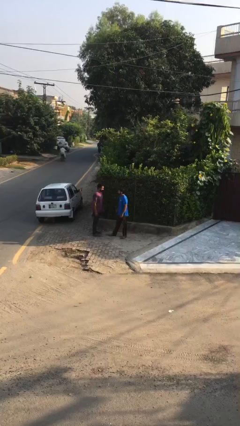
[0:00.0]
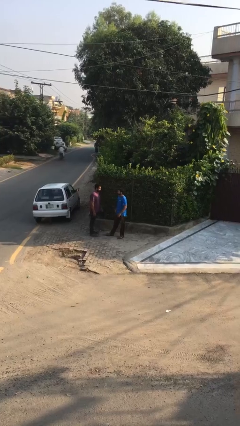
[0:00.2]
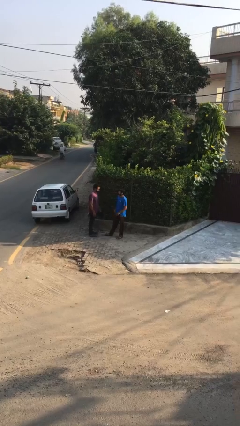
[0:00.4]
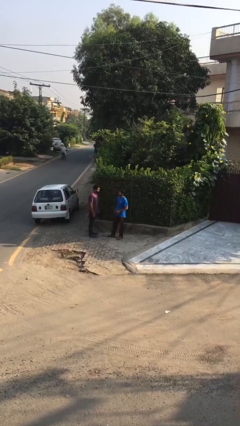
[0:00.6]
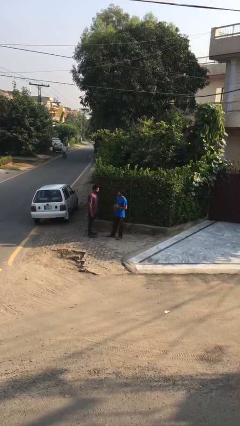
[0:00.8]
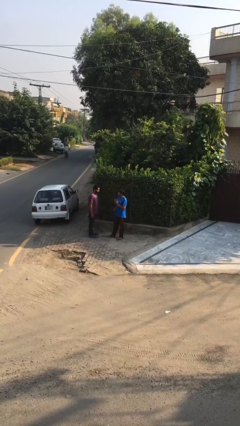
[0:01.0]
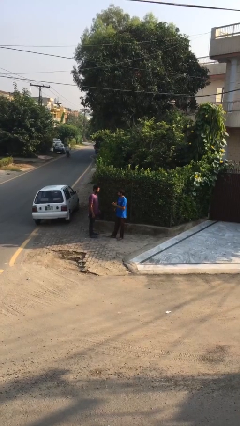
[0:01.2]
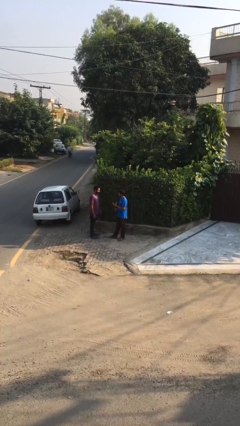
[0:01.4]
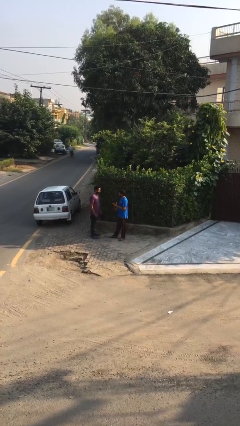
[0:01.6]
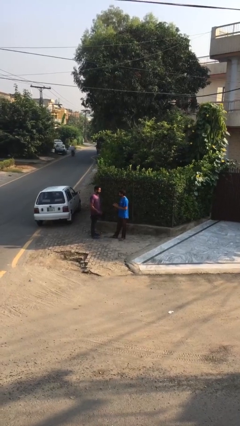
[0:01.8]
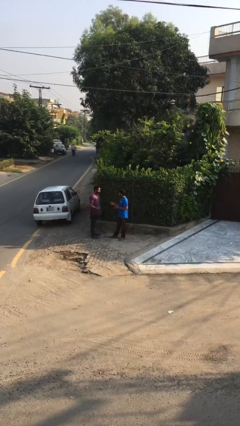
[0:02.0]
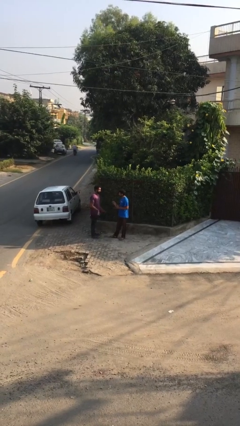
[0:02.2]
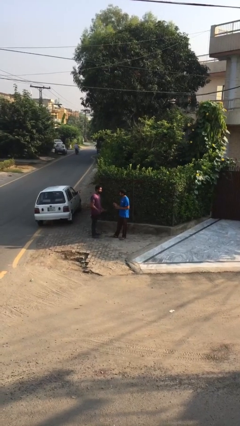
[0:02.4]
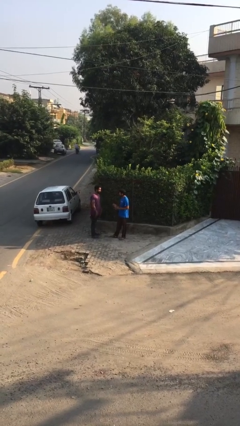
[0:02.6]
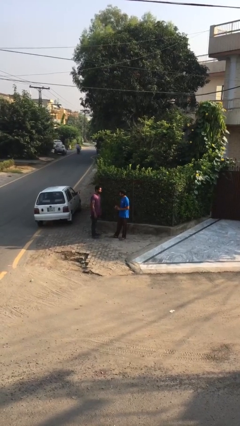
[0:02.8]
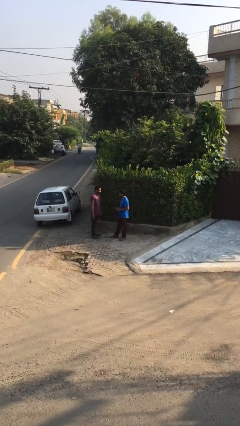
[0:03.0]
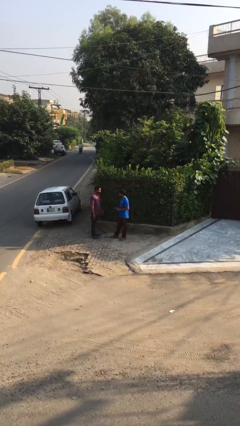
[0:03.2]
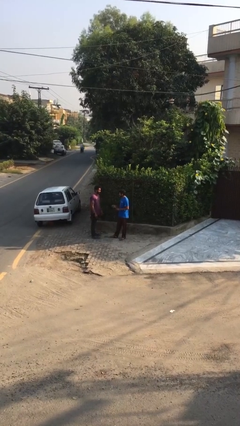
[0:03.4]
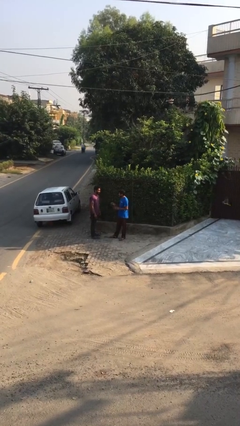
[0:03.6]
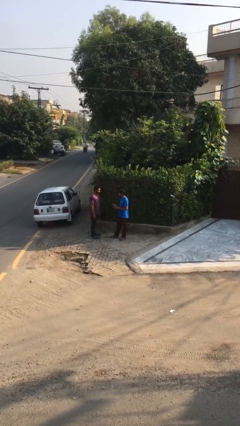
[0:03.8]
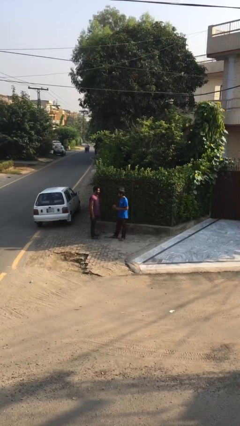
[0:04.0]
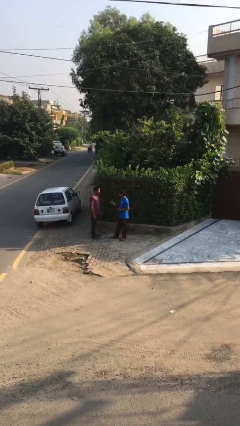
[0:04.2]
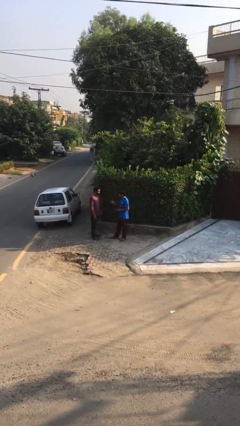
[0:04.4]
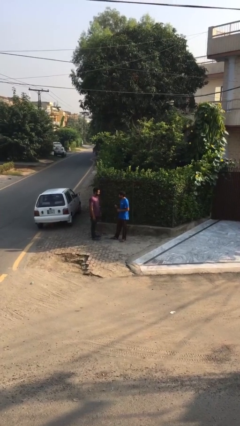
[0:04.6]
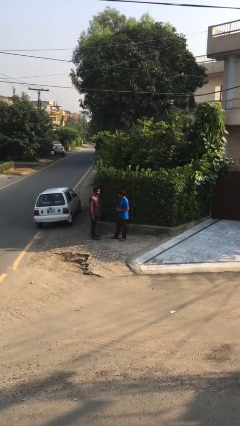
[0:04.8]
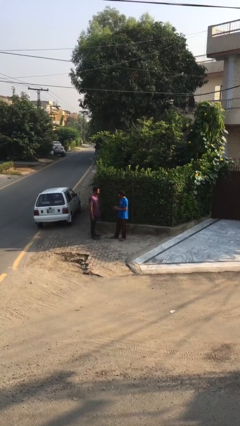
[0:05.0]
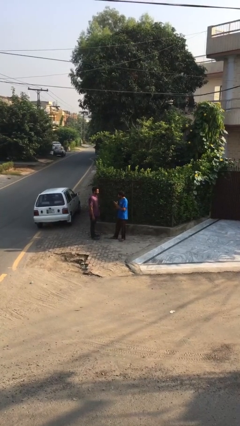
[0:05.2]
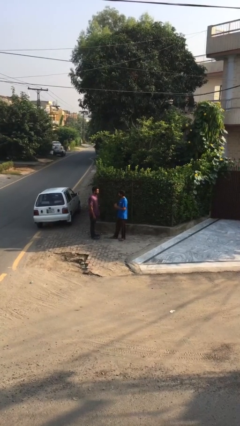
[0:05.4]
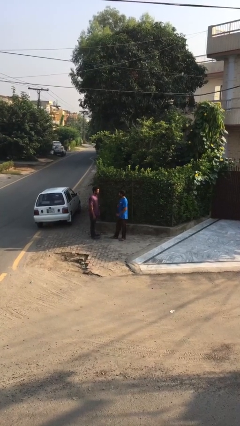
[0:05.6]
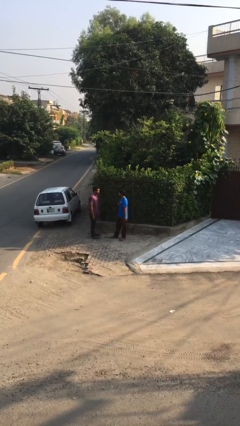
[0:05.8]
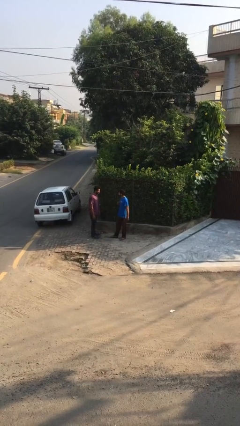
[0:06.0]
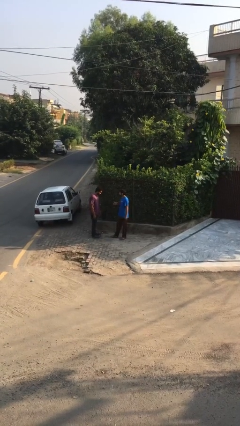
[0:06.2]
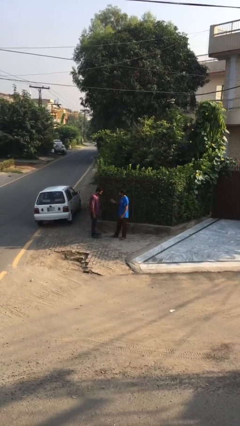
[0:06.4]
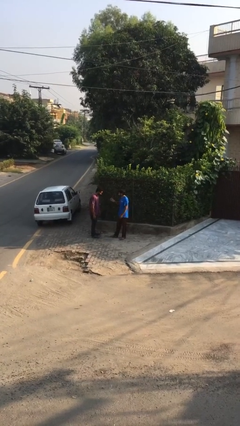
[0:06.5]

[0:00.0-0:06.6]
person talks to person

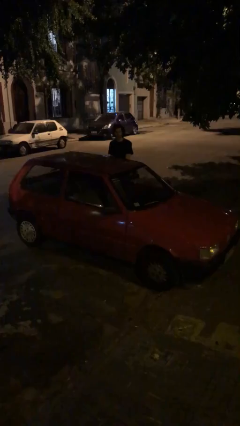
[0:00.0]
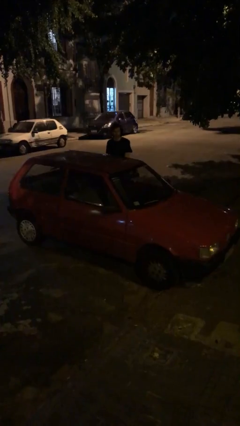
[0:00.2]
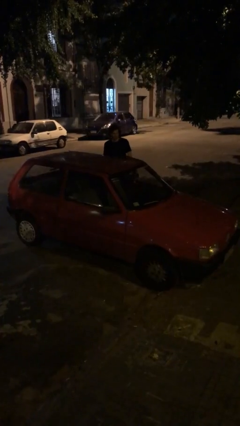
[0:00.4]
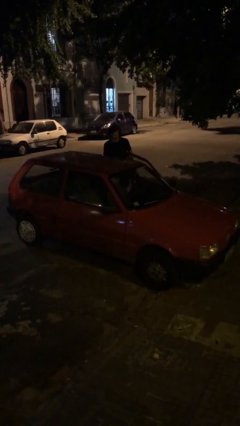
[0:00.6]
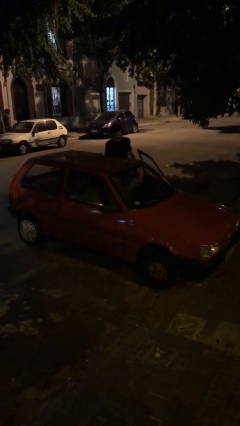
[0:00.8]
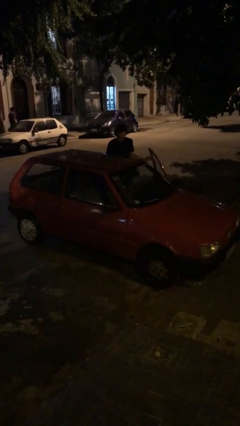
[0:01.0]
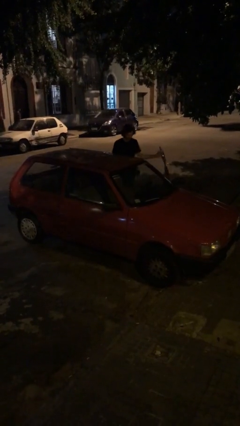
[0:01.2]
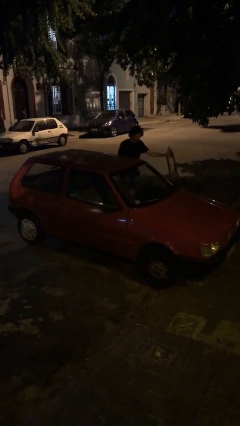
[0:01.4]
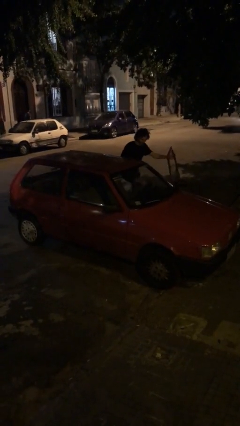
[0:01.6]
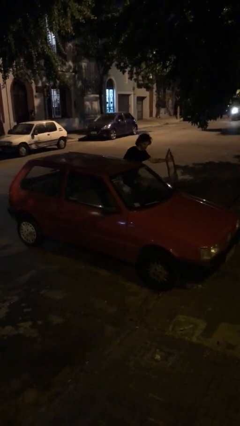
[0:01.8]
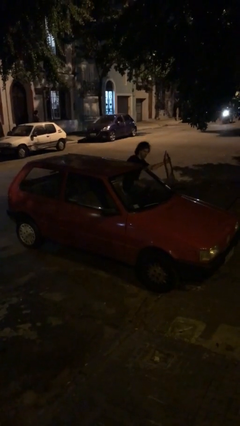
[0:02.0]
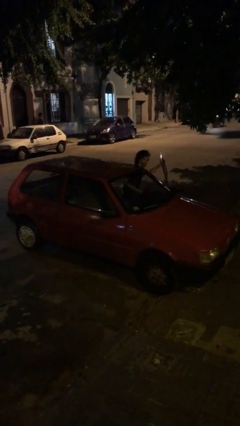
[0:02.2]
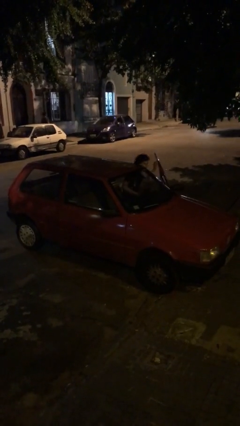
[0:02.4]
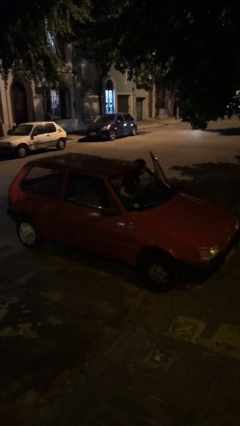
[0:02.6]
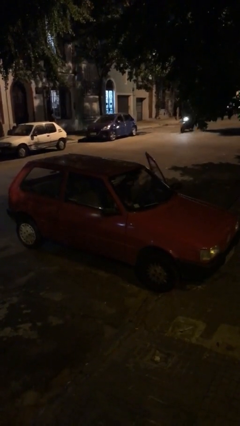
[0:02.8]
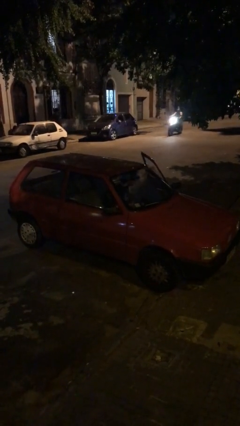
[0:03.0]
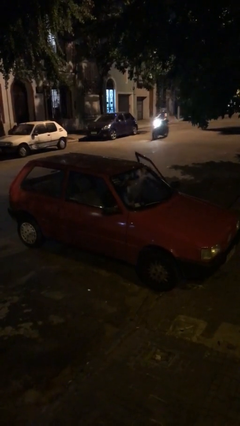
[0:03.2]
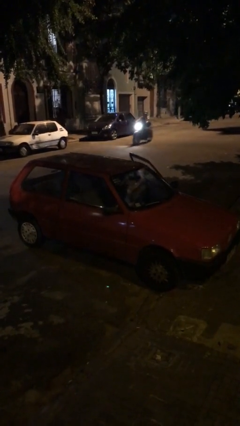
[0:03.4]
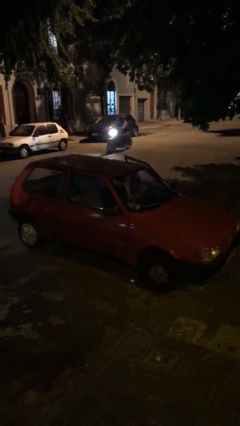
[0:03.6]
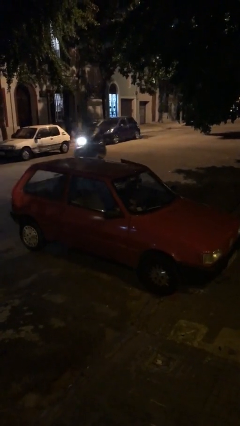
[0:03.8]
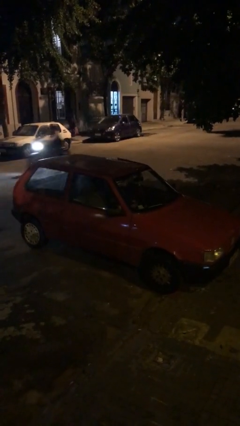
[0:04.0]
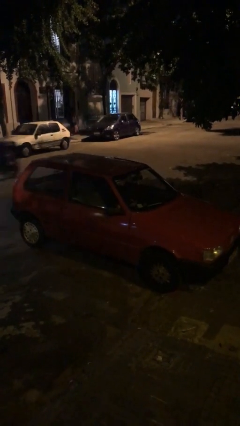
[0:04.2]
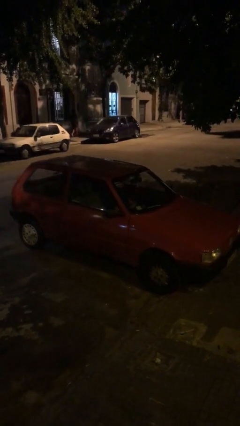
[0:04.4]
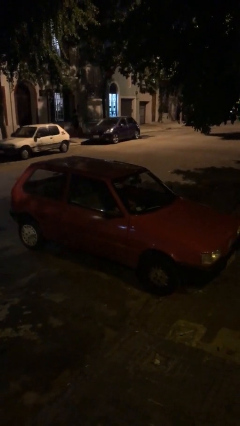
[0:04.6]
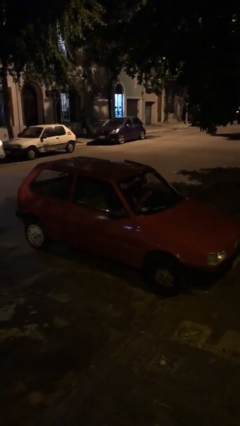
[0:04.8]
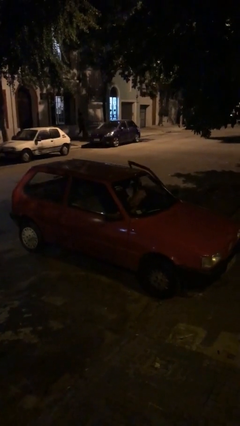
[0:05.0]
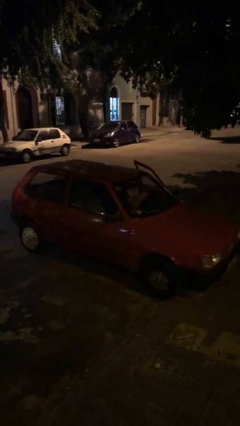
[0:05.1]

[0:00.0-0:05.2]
car picks up person

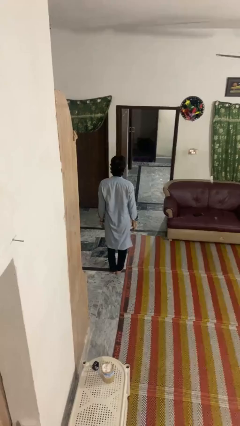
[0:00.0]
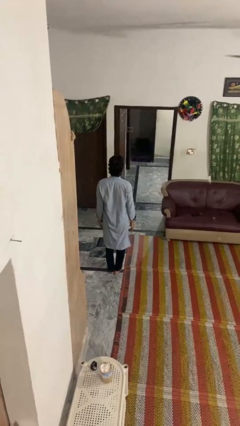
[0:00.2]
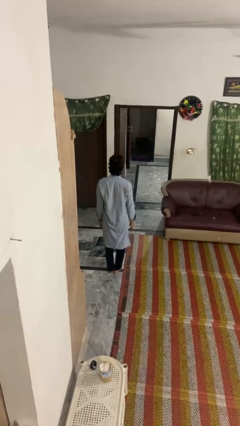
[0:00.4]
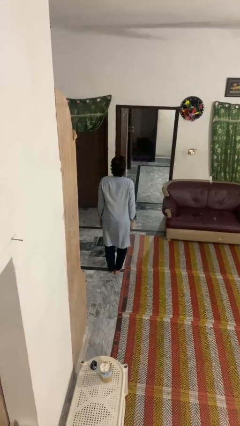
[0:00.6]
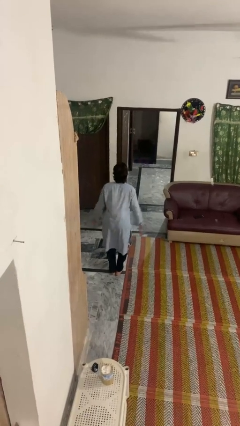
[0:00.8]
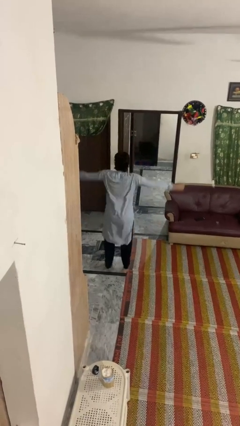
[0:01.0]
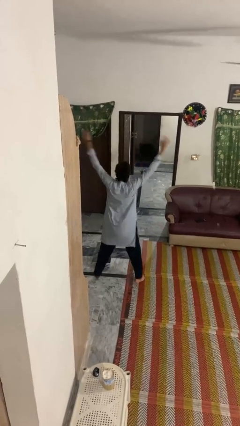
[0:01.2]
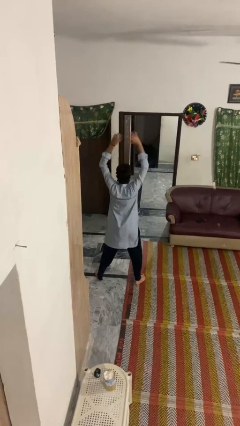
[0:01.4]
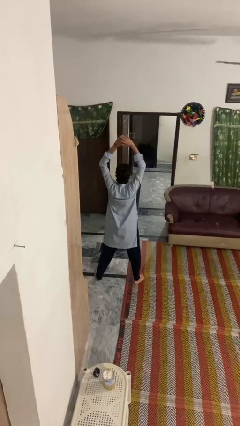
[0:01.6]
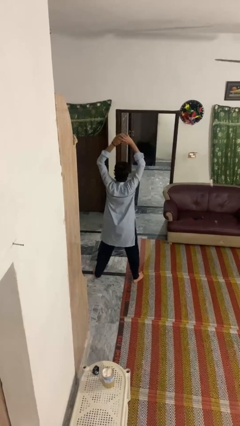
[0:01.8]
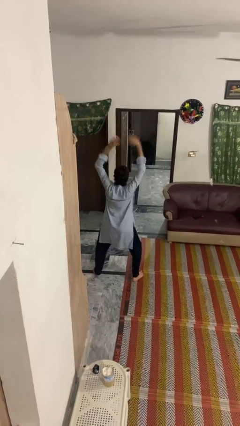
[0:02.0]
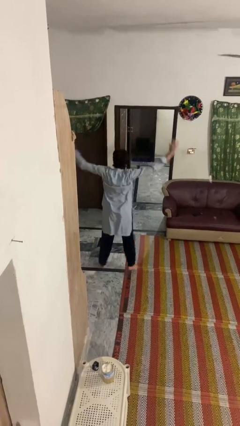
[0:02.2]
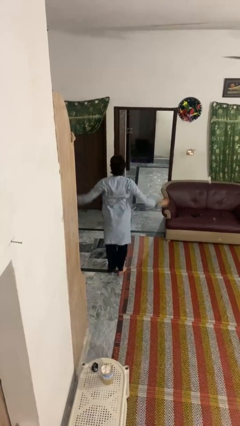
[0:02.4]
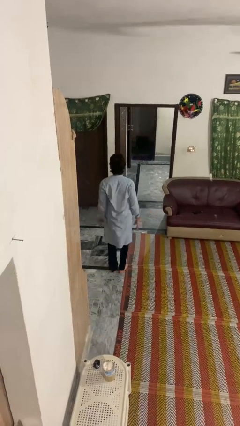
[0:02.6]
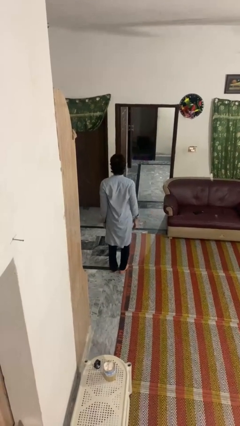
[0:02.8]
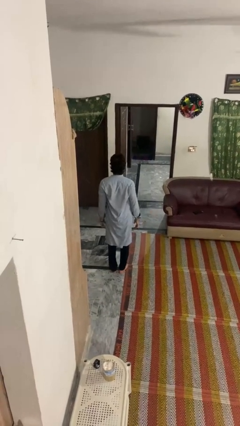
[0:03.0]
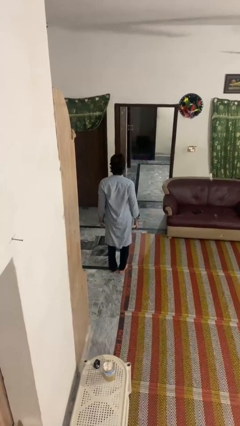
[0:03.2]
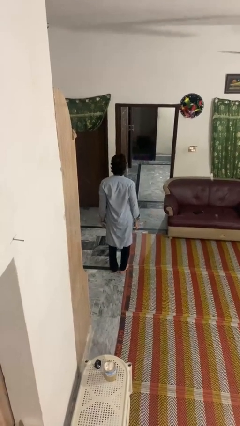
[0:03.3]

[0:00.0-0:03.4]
person exercises with jumping jacks

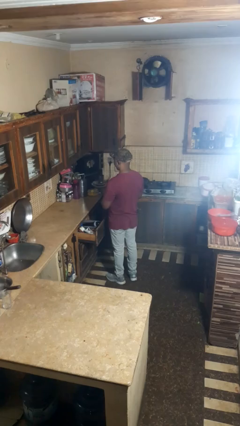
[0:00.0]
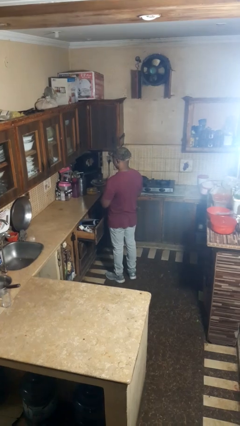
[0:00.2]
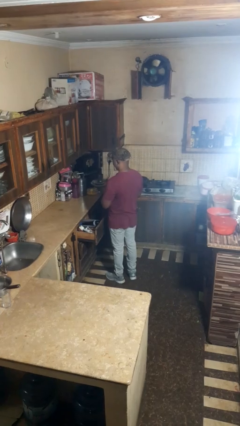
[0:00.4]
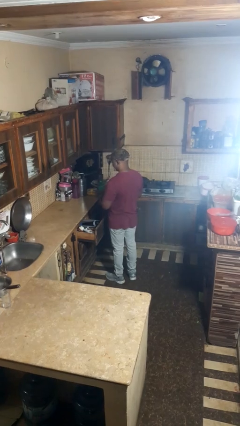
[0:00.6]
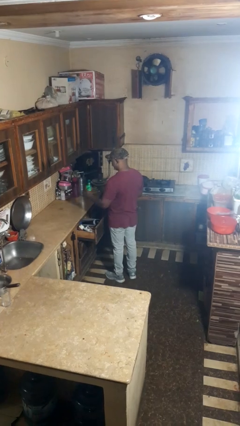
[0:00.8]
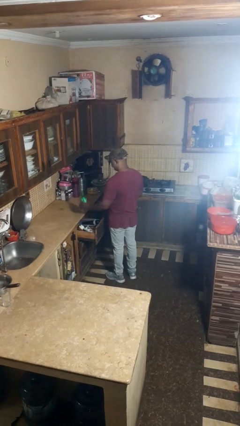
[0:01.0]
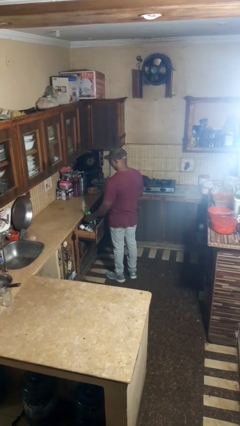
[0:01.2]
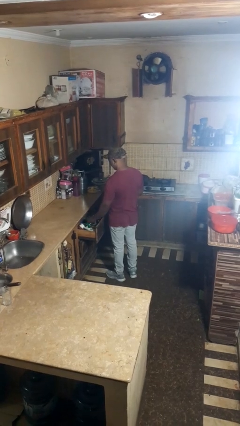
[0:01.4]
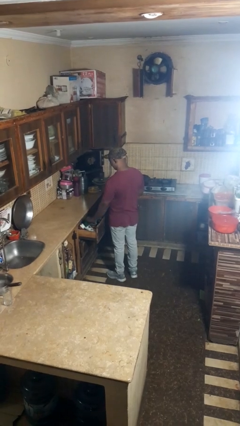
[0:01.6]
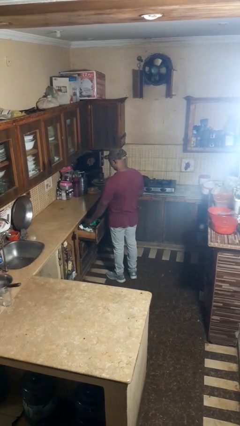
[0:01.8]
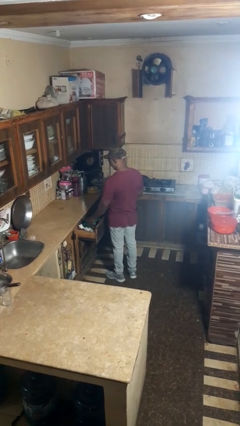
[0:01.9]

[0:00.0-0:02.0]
person puts object into kitchen drawer

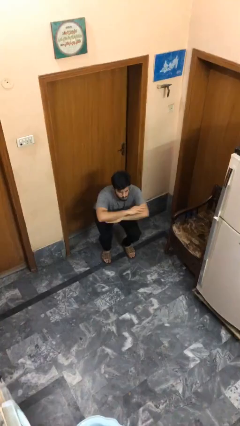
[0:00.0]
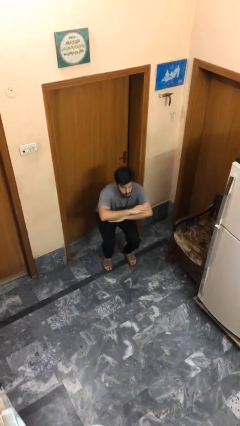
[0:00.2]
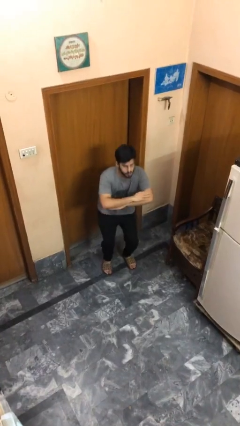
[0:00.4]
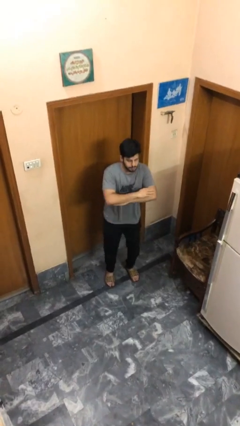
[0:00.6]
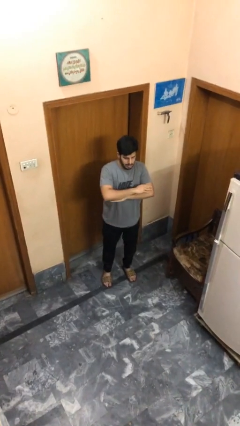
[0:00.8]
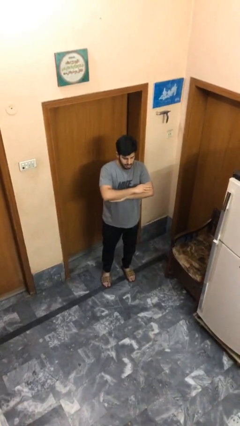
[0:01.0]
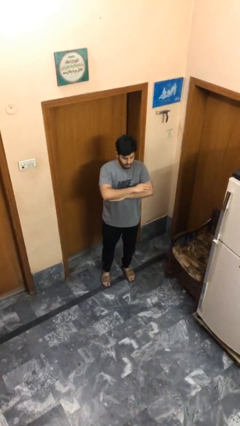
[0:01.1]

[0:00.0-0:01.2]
person stands up
